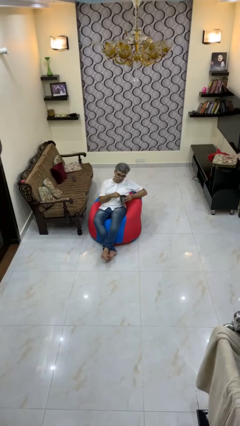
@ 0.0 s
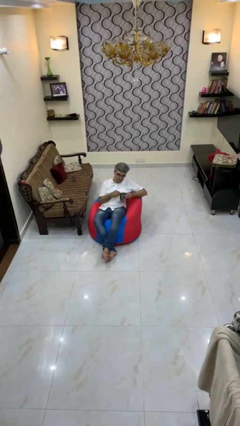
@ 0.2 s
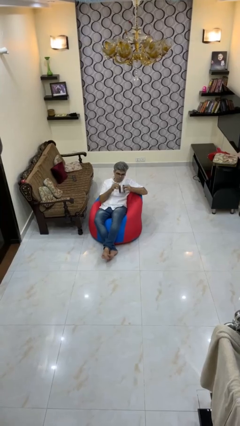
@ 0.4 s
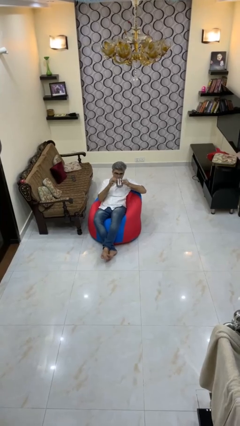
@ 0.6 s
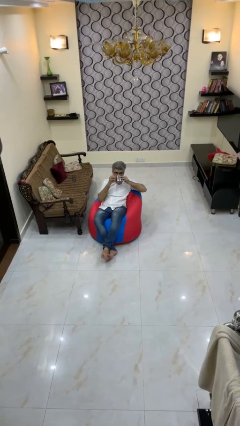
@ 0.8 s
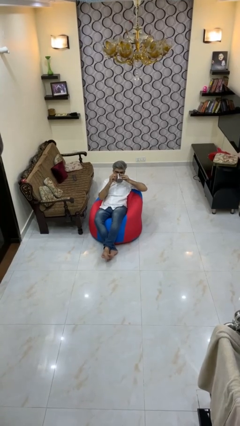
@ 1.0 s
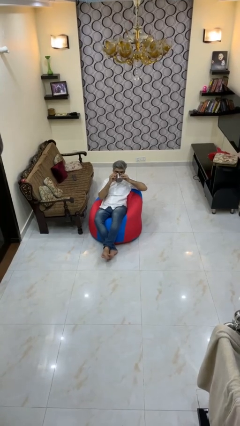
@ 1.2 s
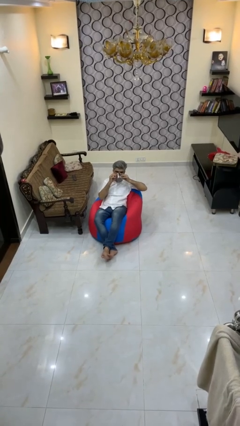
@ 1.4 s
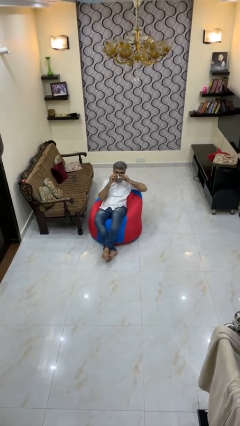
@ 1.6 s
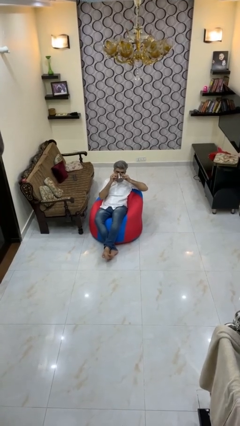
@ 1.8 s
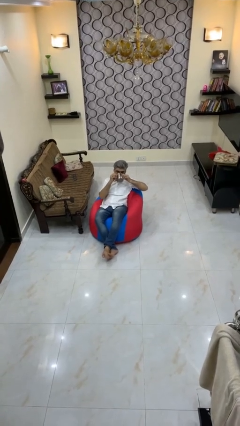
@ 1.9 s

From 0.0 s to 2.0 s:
person drinks from mug

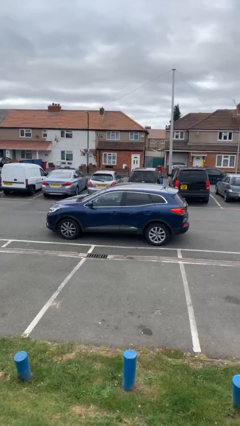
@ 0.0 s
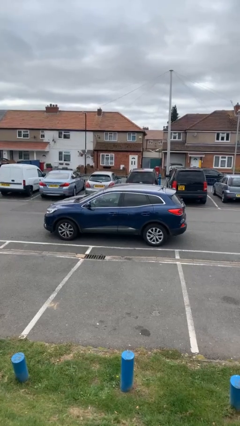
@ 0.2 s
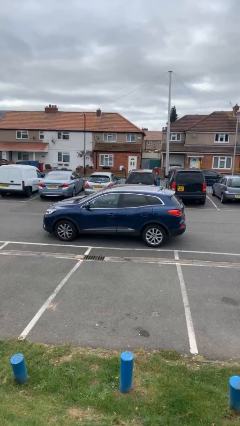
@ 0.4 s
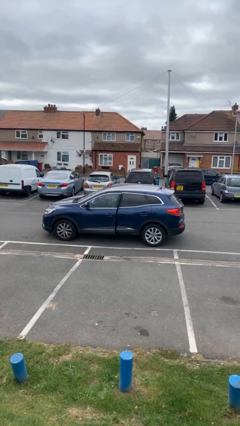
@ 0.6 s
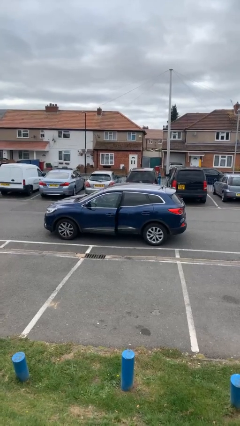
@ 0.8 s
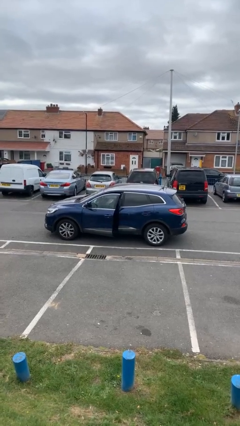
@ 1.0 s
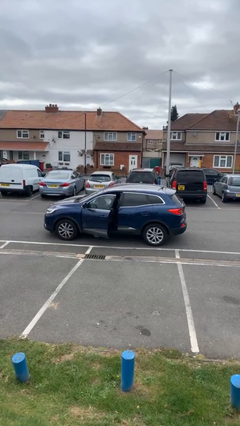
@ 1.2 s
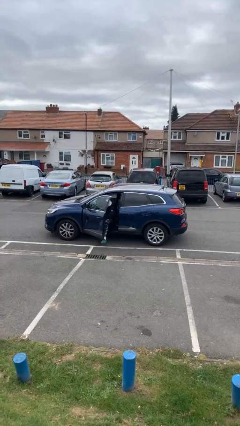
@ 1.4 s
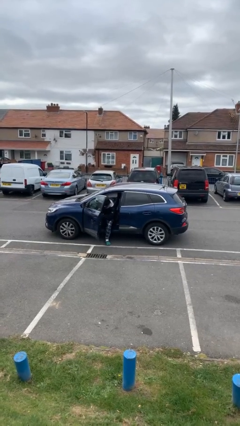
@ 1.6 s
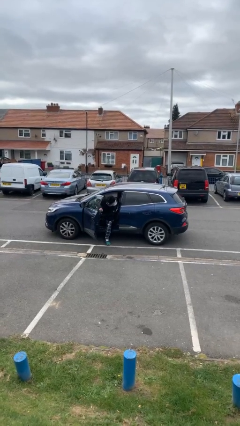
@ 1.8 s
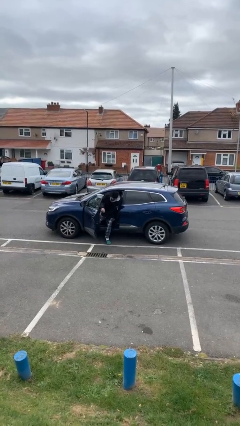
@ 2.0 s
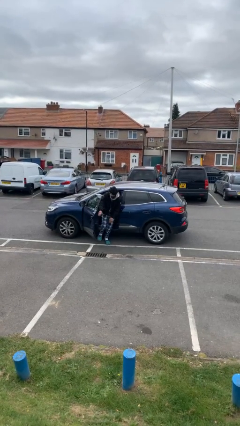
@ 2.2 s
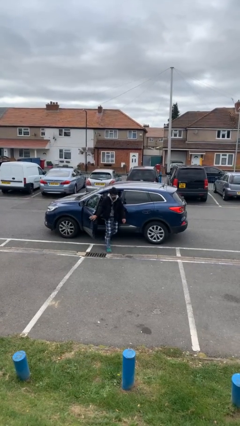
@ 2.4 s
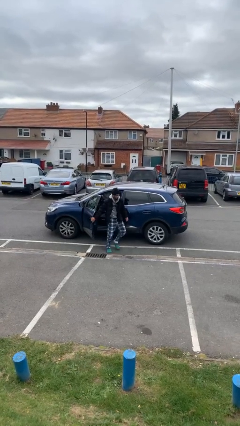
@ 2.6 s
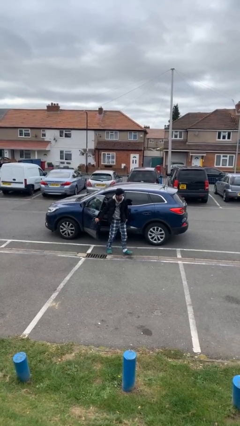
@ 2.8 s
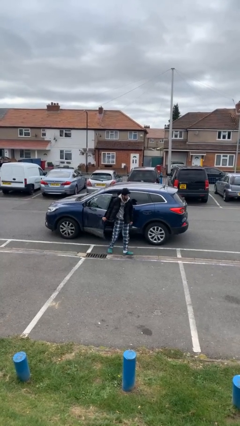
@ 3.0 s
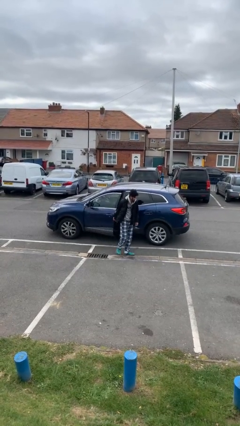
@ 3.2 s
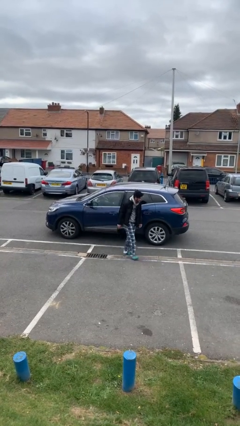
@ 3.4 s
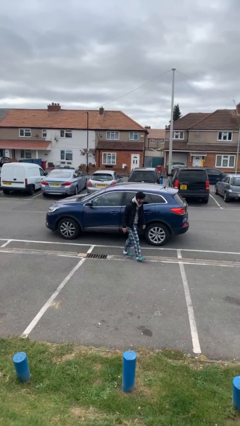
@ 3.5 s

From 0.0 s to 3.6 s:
car drops off person

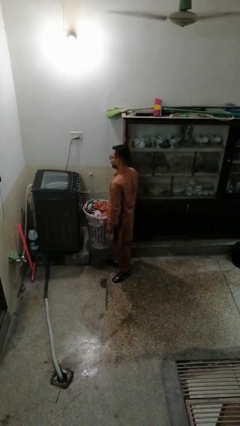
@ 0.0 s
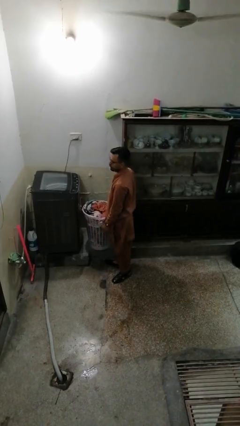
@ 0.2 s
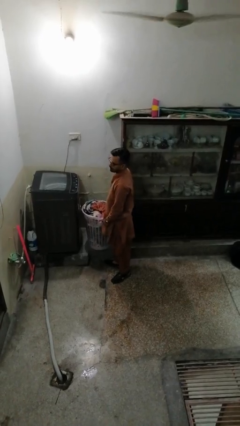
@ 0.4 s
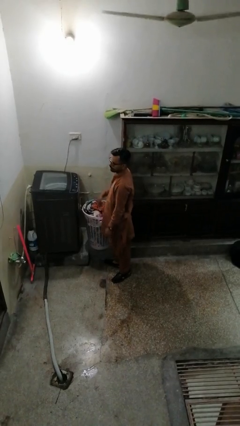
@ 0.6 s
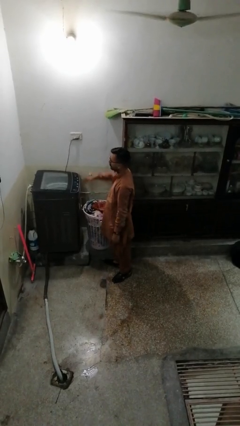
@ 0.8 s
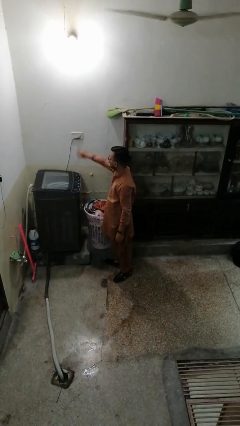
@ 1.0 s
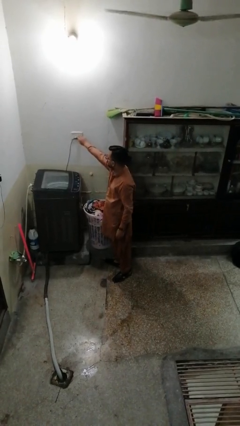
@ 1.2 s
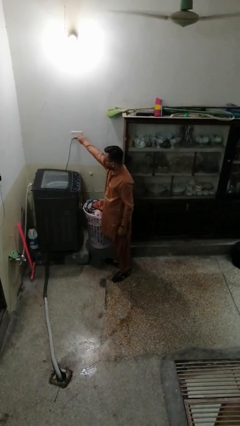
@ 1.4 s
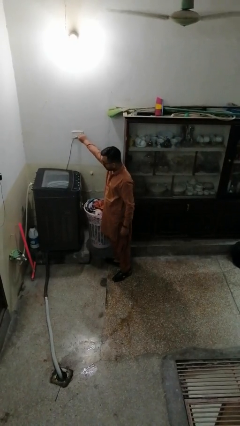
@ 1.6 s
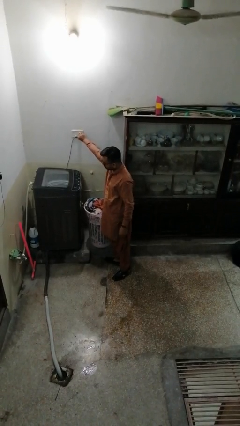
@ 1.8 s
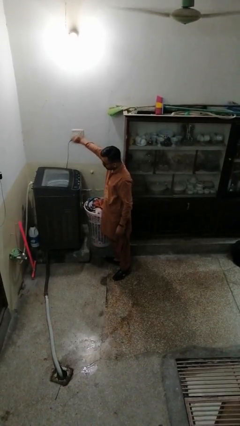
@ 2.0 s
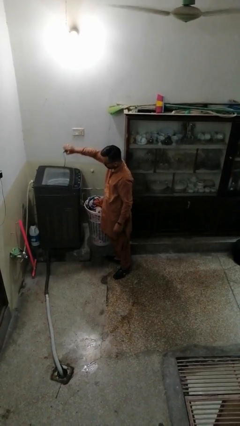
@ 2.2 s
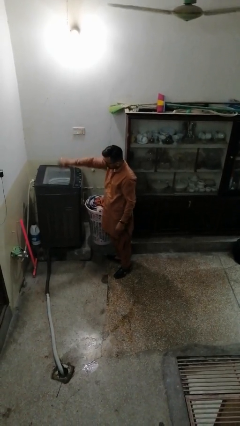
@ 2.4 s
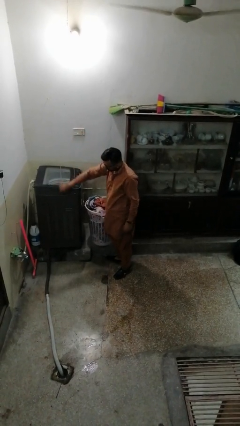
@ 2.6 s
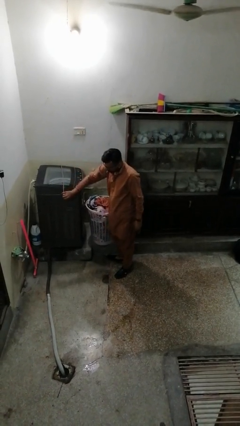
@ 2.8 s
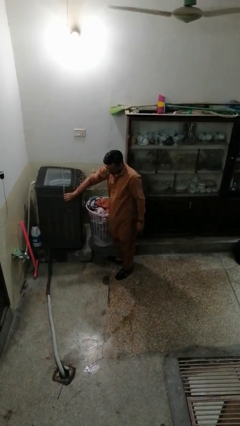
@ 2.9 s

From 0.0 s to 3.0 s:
person unplugs from electrical socket

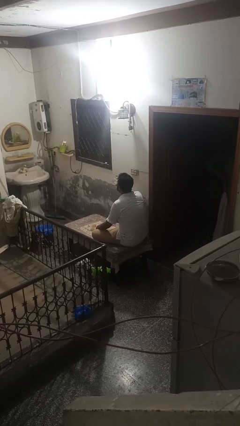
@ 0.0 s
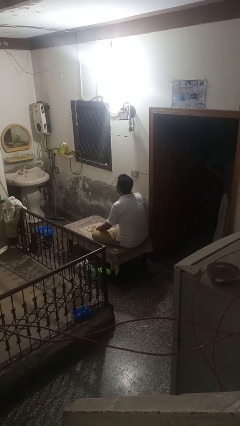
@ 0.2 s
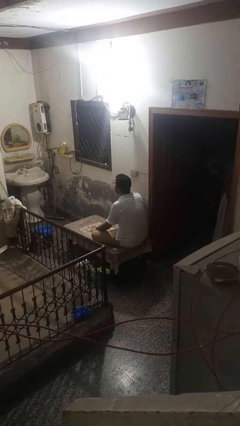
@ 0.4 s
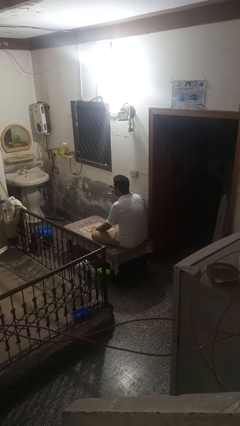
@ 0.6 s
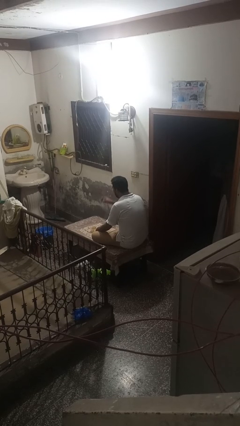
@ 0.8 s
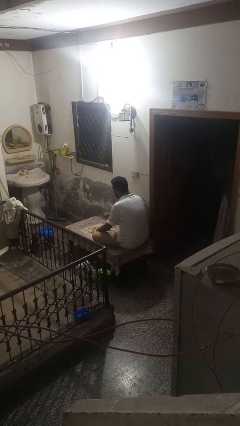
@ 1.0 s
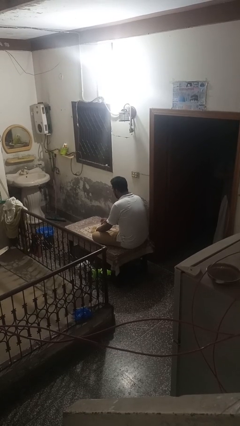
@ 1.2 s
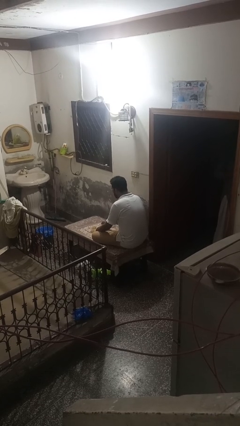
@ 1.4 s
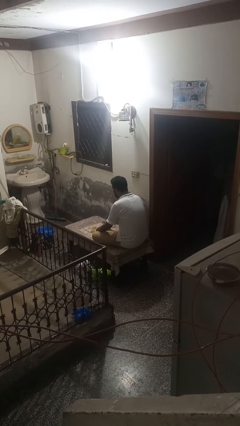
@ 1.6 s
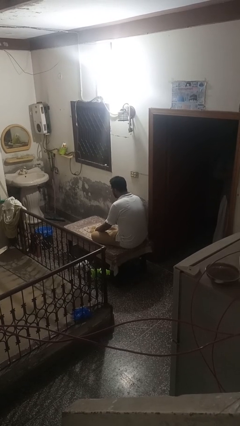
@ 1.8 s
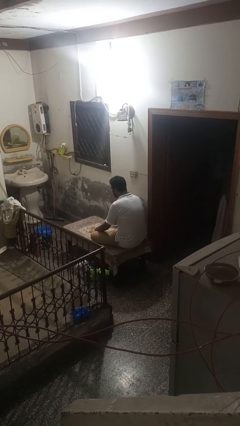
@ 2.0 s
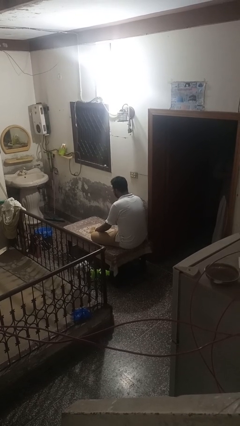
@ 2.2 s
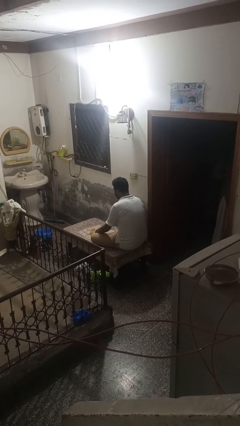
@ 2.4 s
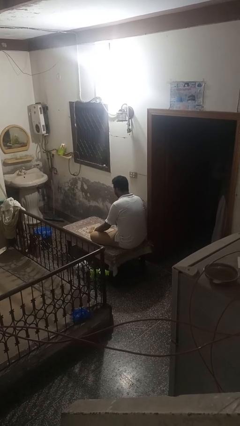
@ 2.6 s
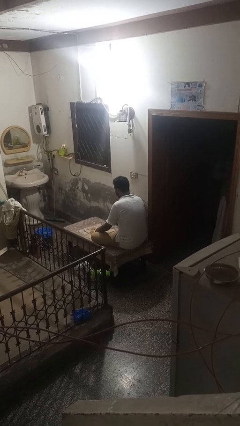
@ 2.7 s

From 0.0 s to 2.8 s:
person puts down object on table

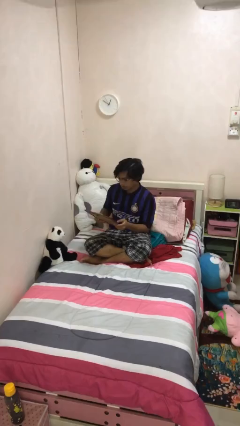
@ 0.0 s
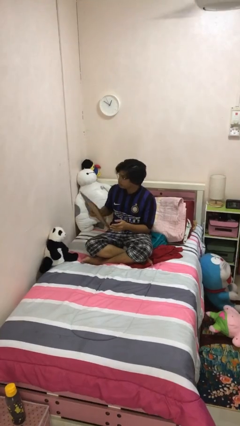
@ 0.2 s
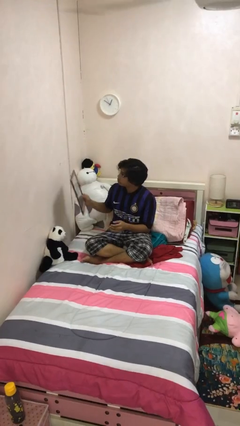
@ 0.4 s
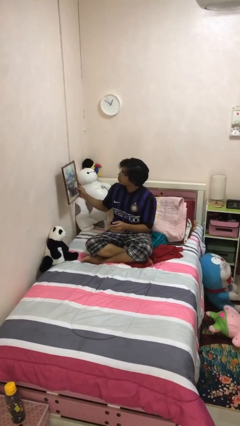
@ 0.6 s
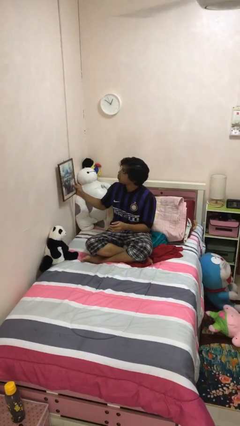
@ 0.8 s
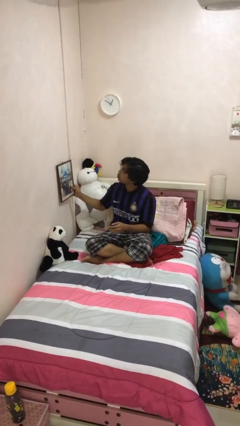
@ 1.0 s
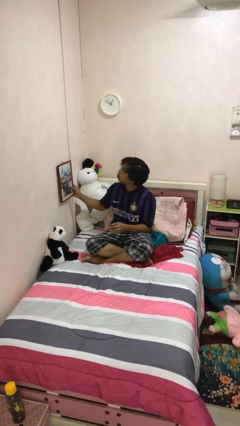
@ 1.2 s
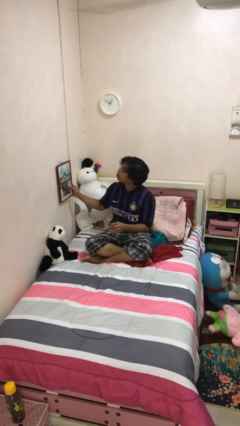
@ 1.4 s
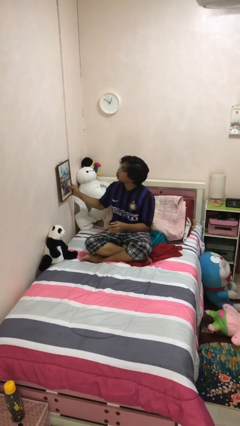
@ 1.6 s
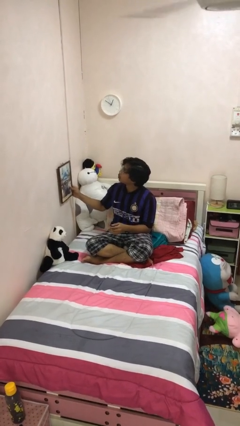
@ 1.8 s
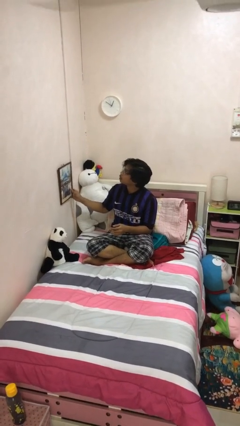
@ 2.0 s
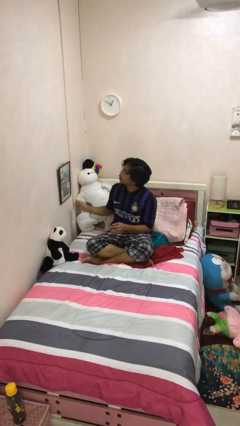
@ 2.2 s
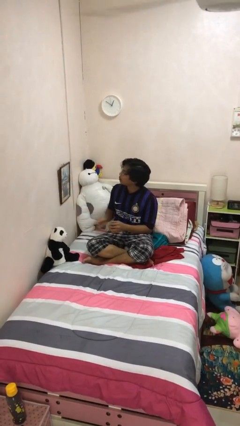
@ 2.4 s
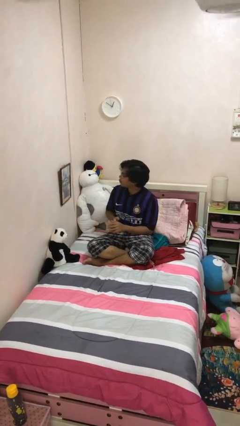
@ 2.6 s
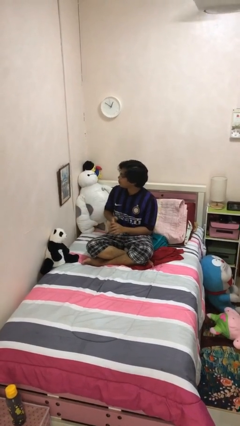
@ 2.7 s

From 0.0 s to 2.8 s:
person puts up picture frame

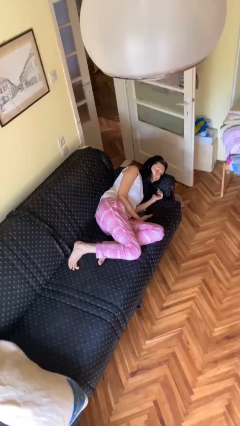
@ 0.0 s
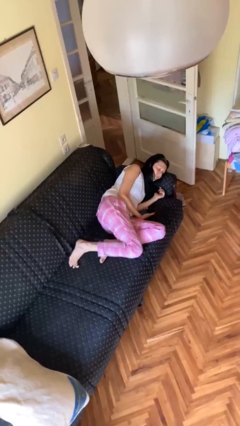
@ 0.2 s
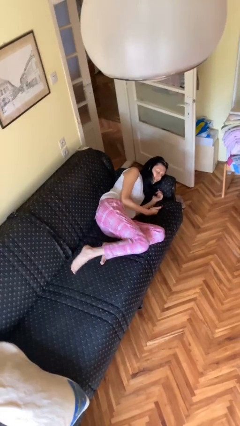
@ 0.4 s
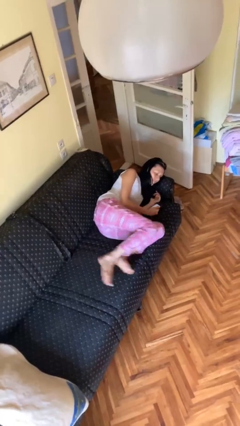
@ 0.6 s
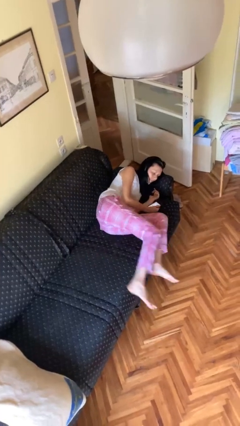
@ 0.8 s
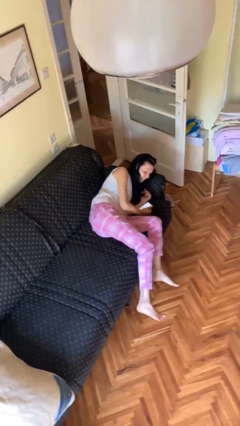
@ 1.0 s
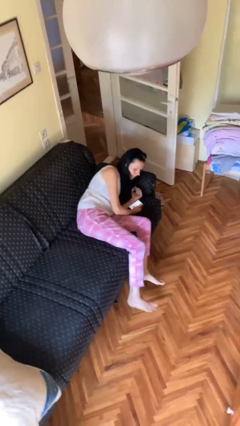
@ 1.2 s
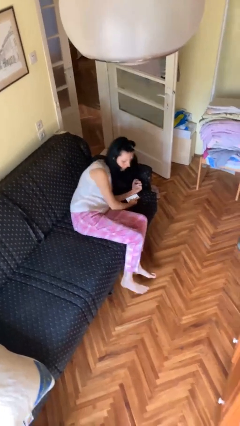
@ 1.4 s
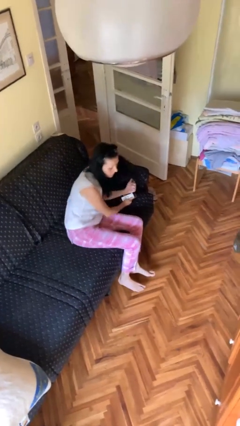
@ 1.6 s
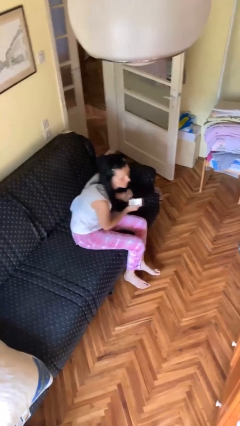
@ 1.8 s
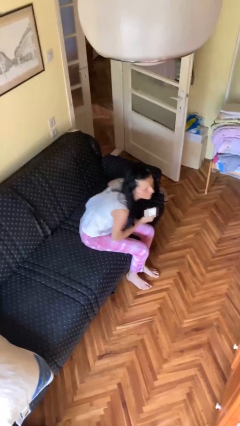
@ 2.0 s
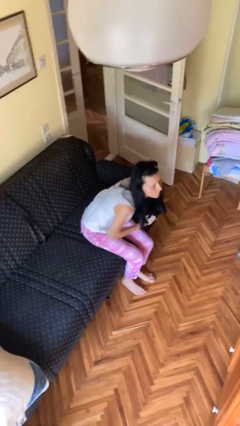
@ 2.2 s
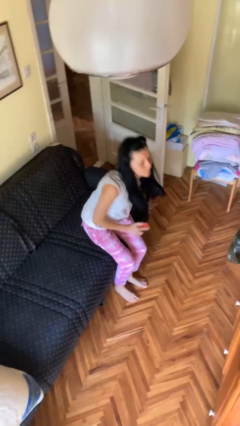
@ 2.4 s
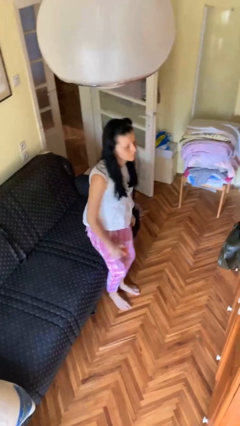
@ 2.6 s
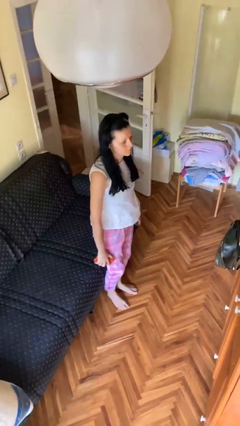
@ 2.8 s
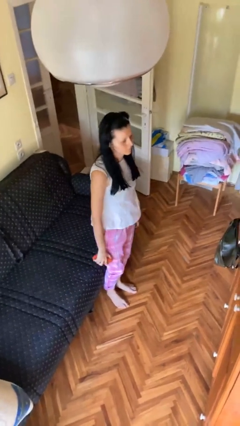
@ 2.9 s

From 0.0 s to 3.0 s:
person stands up
